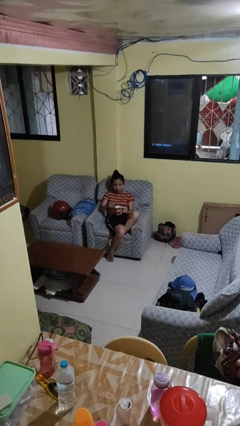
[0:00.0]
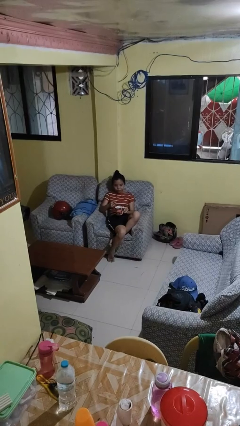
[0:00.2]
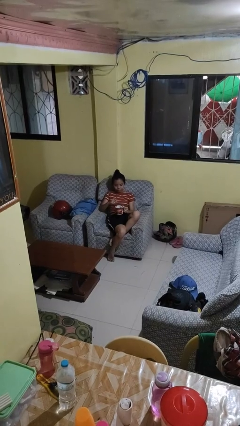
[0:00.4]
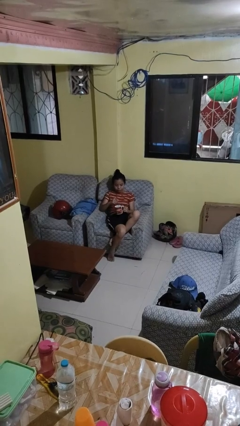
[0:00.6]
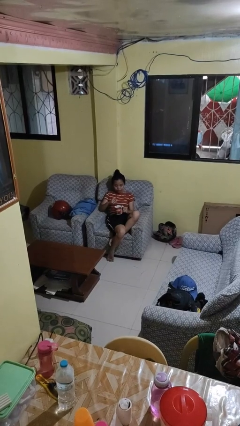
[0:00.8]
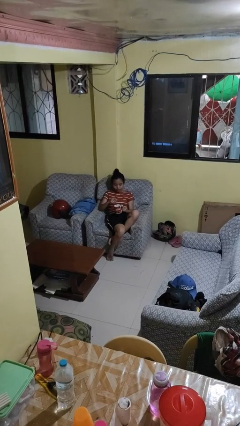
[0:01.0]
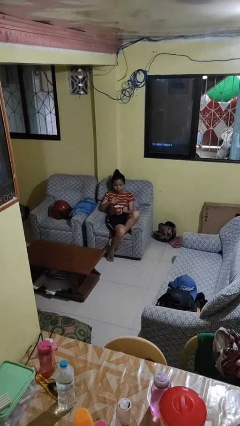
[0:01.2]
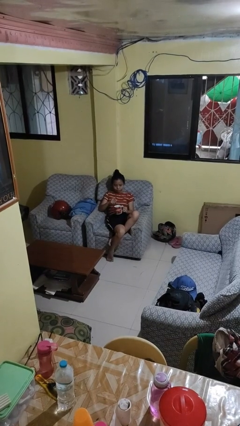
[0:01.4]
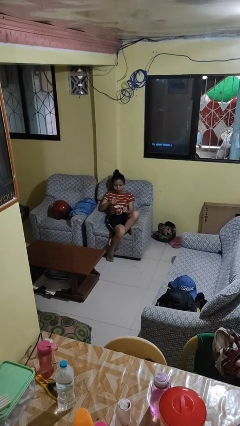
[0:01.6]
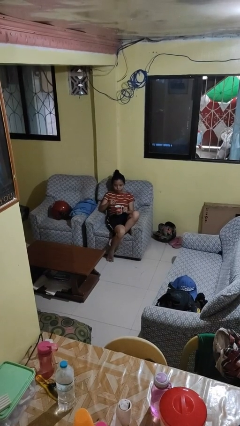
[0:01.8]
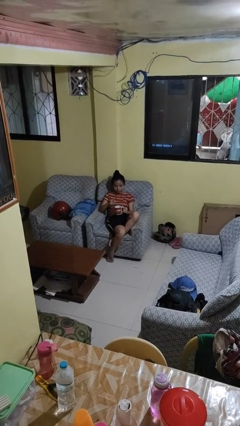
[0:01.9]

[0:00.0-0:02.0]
person stirs mug

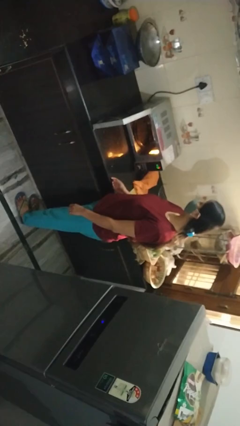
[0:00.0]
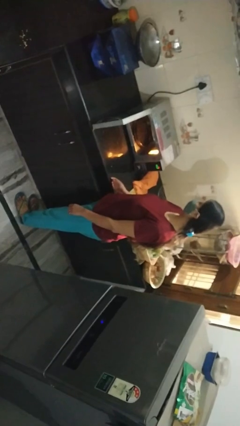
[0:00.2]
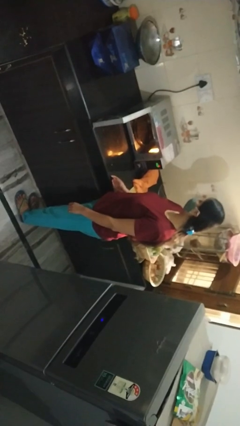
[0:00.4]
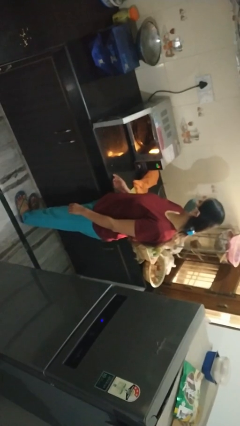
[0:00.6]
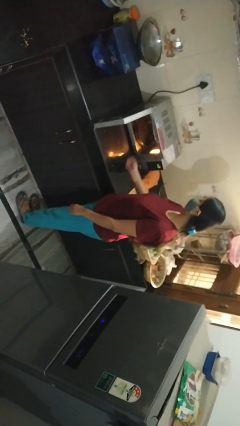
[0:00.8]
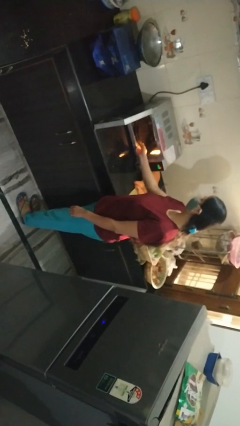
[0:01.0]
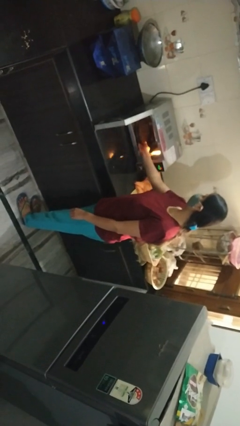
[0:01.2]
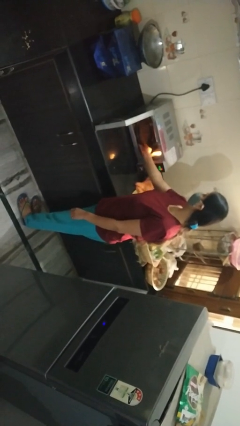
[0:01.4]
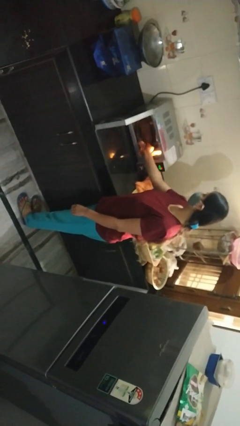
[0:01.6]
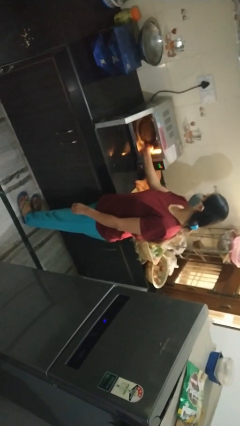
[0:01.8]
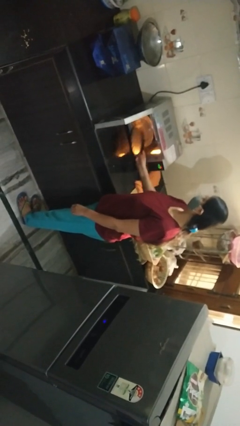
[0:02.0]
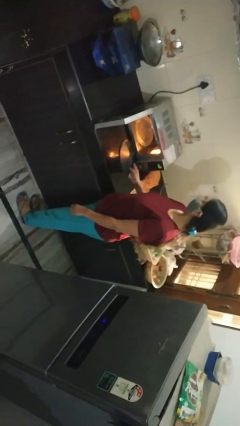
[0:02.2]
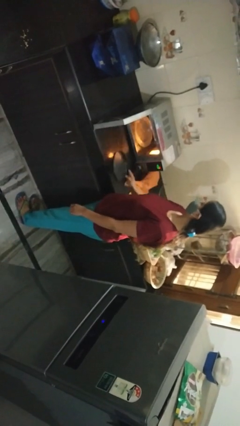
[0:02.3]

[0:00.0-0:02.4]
person takes object from microwave

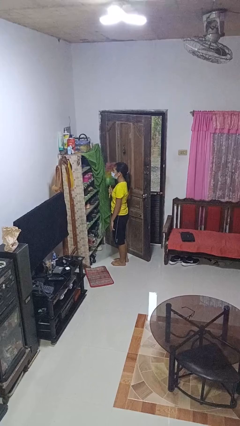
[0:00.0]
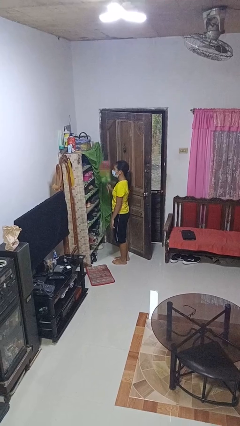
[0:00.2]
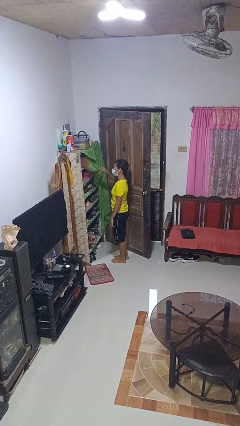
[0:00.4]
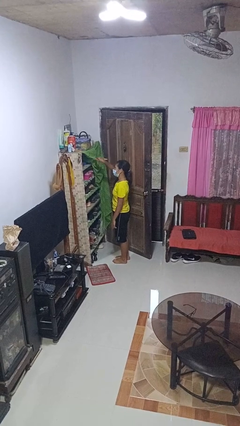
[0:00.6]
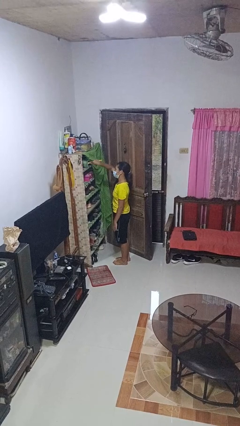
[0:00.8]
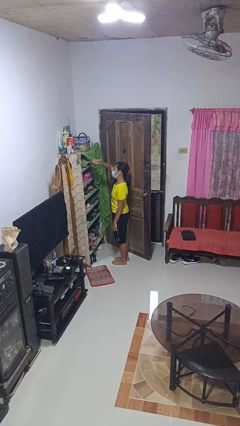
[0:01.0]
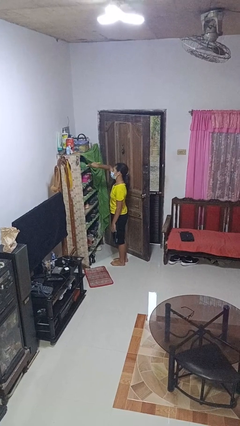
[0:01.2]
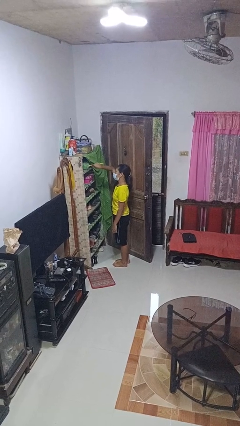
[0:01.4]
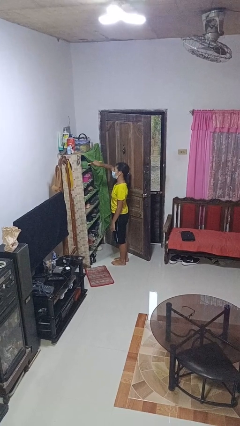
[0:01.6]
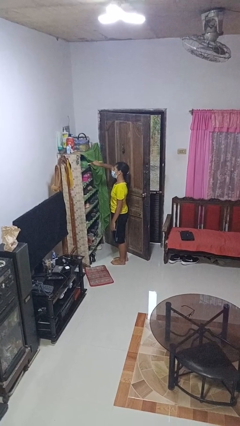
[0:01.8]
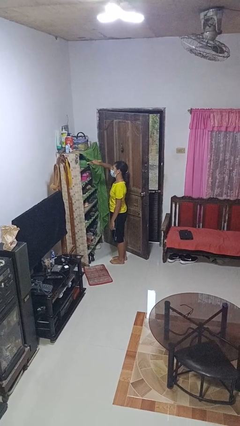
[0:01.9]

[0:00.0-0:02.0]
person dusts furniture

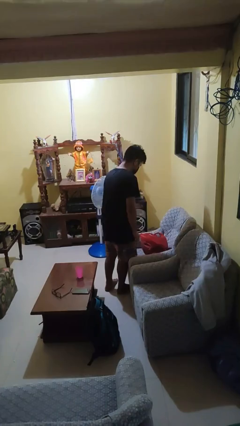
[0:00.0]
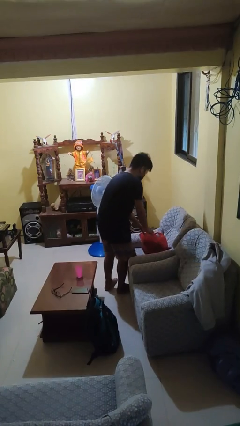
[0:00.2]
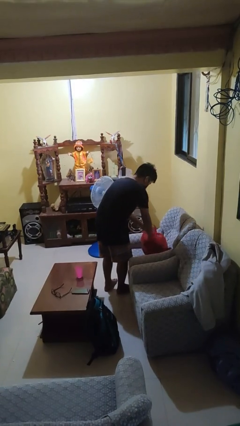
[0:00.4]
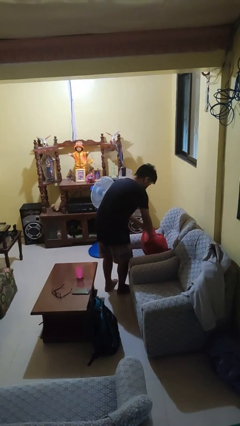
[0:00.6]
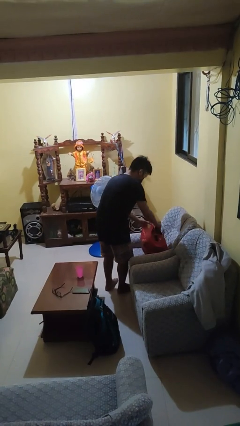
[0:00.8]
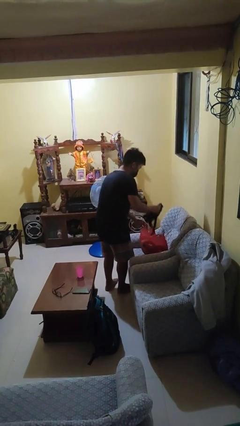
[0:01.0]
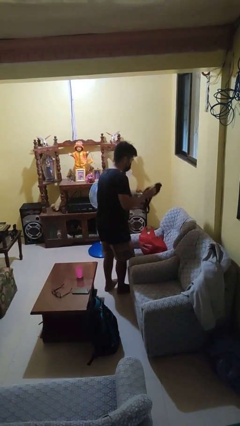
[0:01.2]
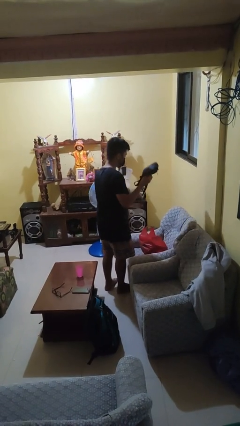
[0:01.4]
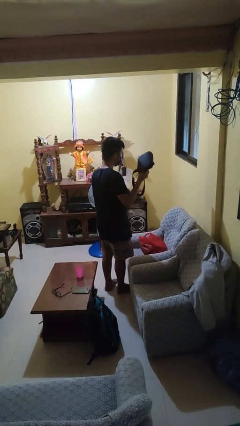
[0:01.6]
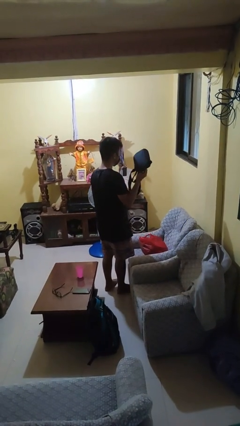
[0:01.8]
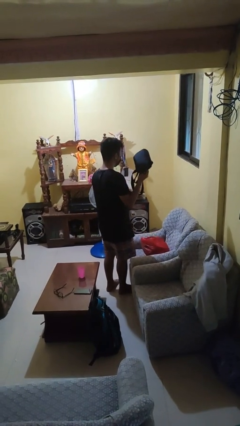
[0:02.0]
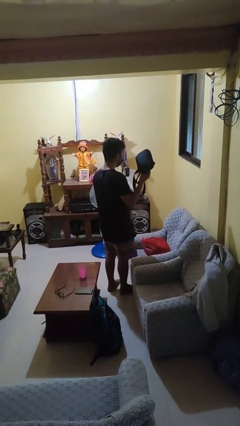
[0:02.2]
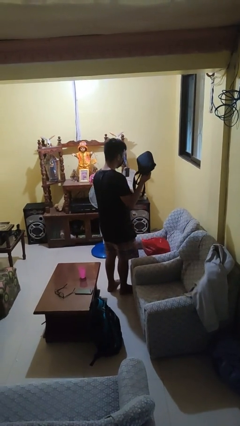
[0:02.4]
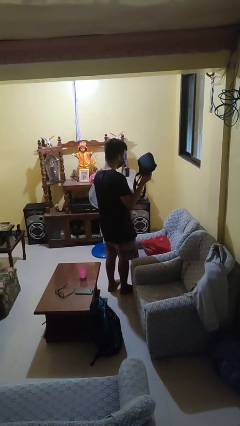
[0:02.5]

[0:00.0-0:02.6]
person takes object from bag

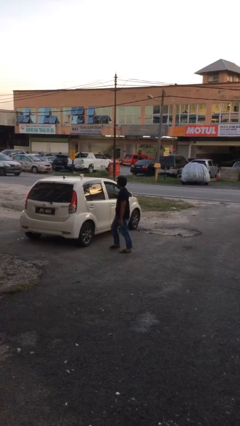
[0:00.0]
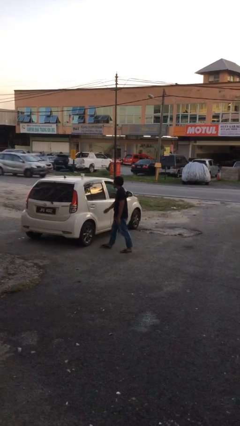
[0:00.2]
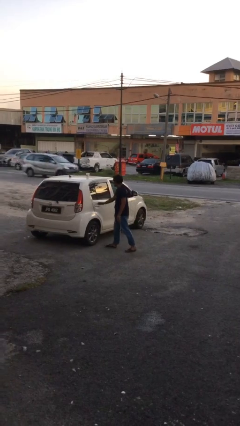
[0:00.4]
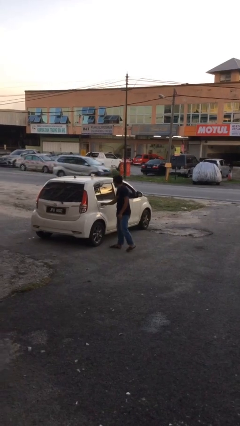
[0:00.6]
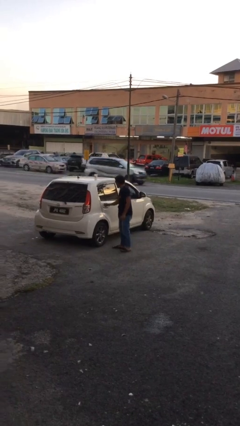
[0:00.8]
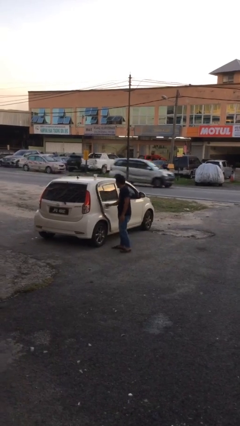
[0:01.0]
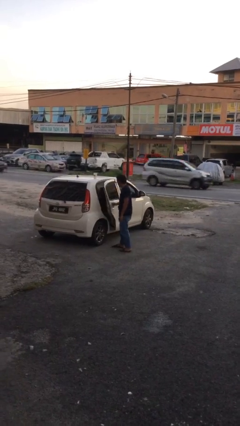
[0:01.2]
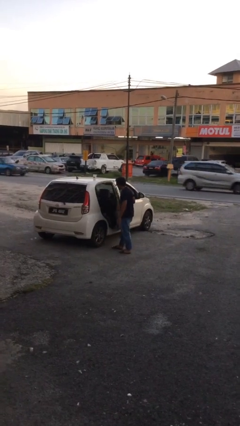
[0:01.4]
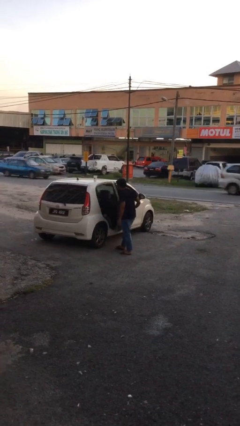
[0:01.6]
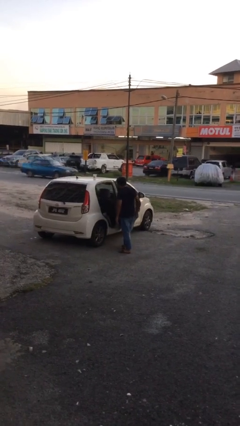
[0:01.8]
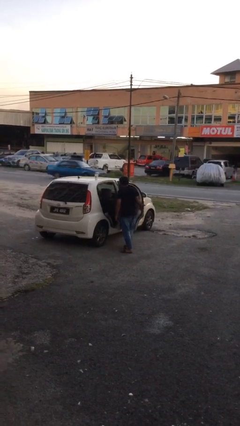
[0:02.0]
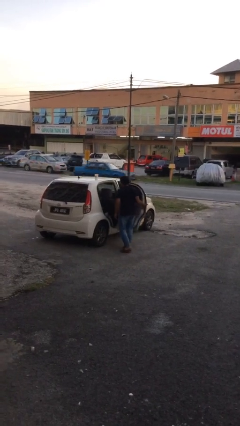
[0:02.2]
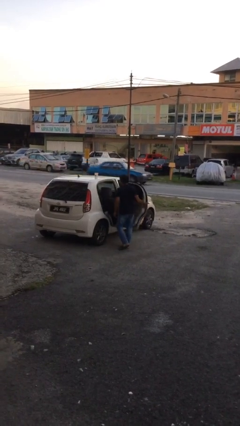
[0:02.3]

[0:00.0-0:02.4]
person opens car door

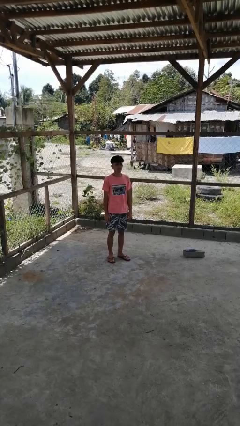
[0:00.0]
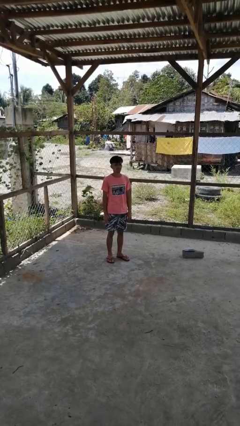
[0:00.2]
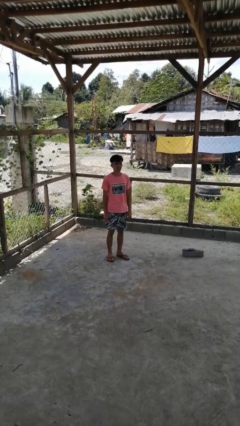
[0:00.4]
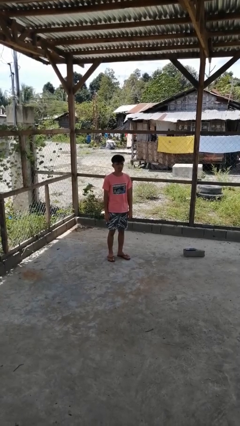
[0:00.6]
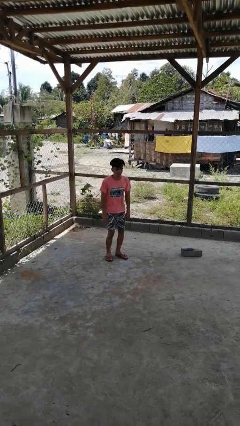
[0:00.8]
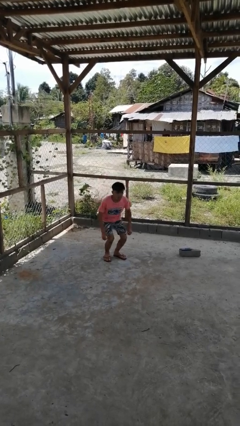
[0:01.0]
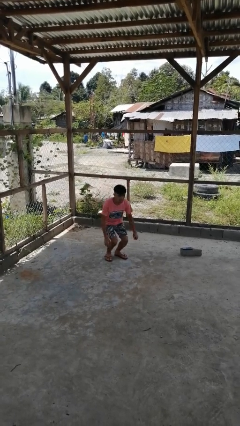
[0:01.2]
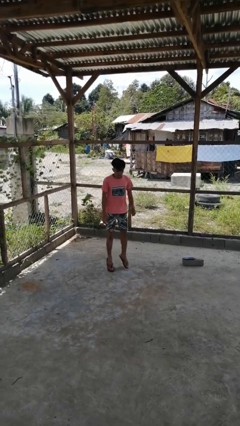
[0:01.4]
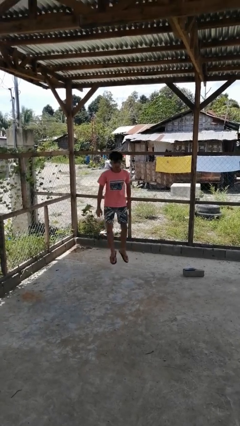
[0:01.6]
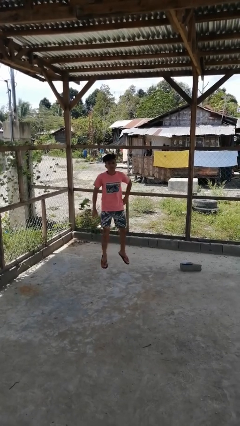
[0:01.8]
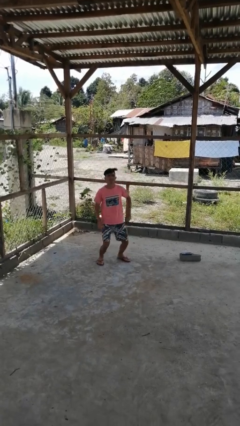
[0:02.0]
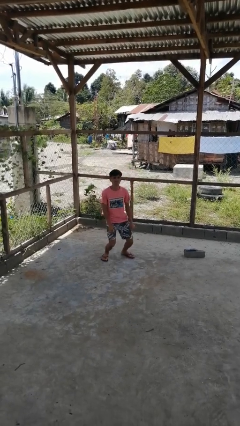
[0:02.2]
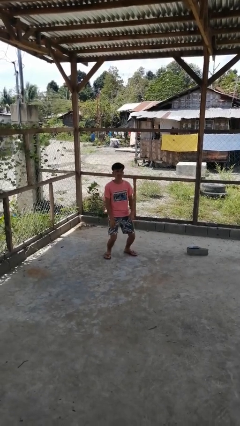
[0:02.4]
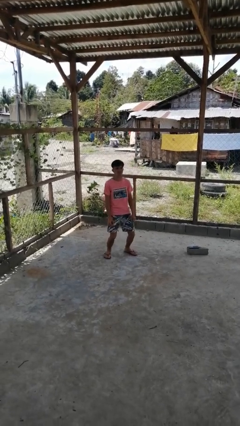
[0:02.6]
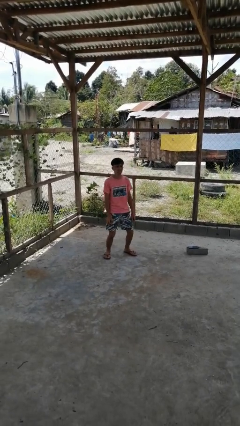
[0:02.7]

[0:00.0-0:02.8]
person jumps

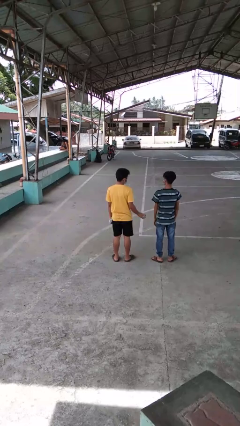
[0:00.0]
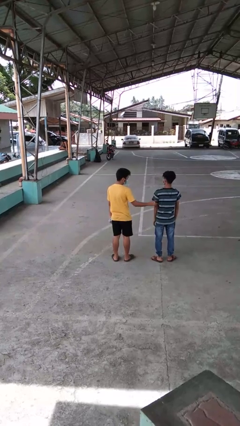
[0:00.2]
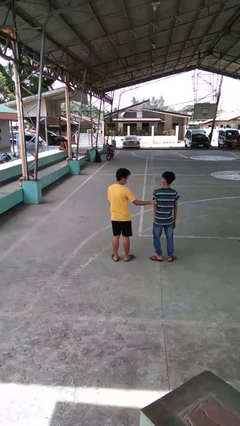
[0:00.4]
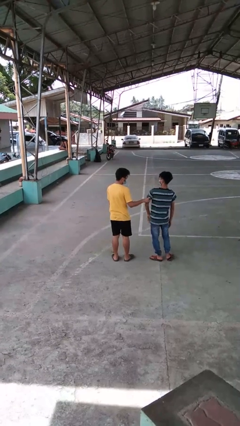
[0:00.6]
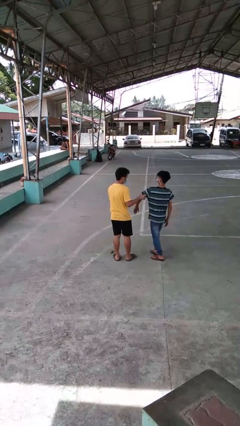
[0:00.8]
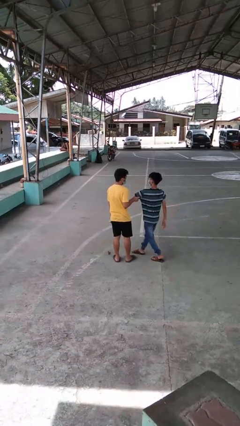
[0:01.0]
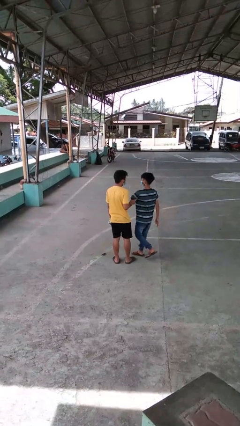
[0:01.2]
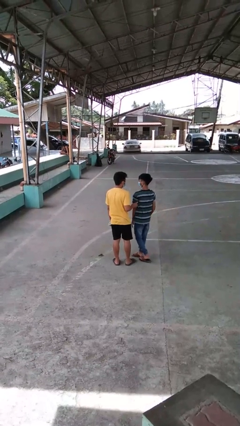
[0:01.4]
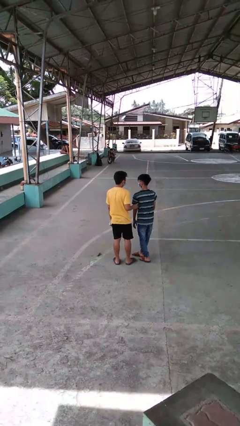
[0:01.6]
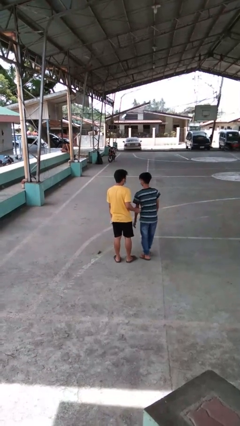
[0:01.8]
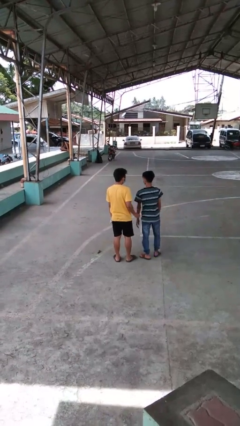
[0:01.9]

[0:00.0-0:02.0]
person grabs person by bicep

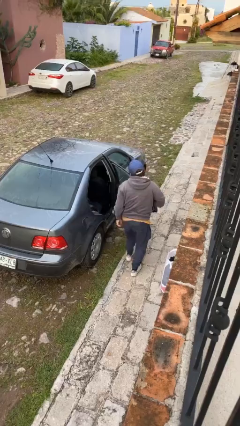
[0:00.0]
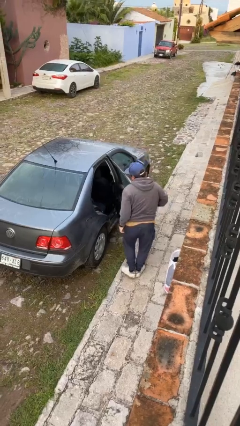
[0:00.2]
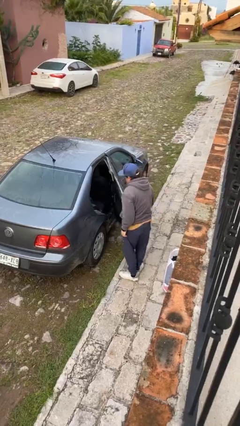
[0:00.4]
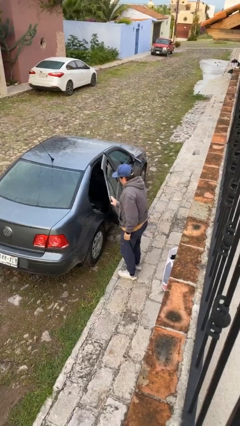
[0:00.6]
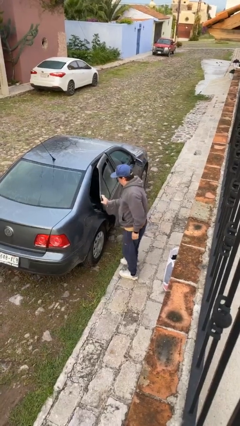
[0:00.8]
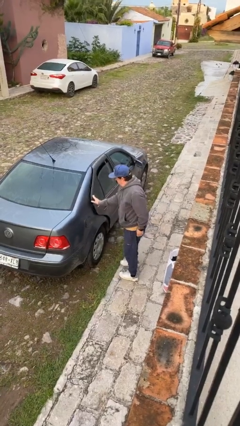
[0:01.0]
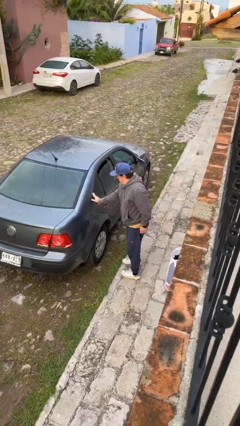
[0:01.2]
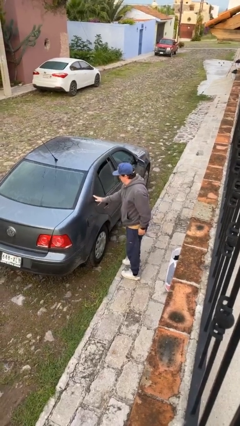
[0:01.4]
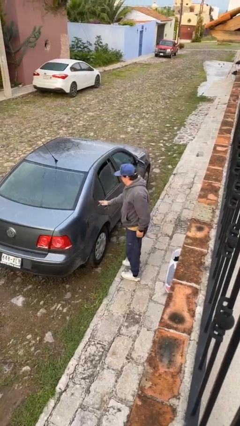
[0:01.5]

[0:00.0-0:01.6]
person closes car door
